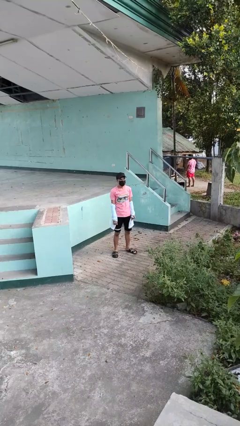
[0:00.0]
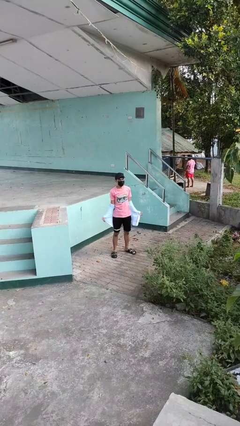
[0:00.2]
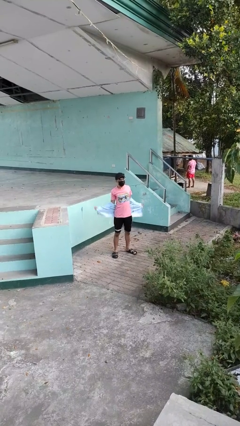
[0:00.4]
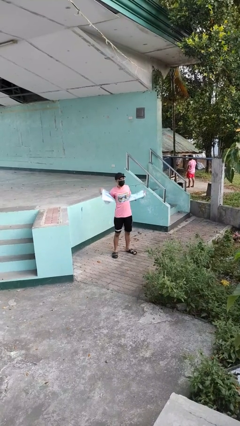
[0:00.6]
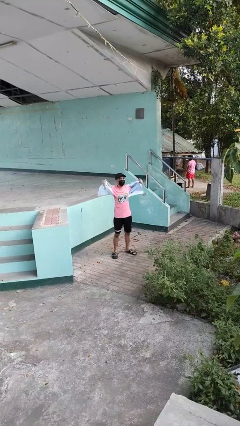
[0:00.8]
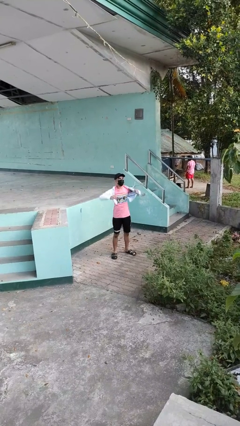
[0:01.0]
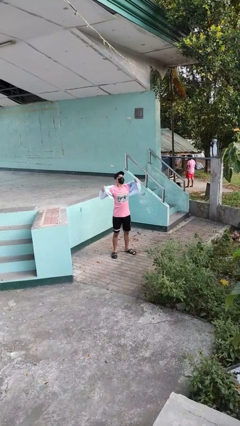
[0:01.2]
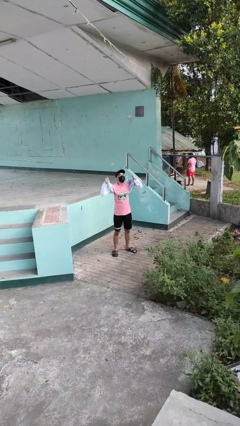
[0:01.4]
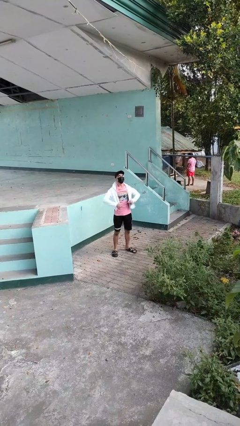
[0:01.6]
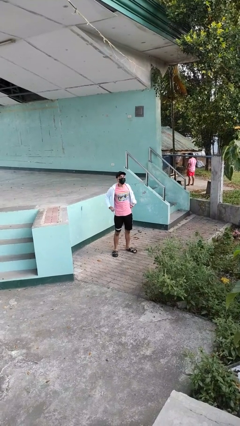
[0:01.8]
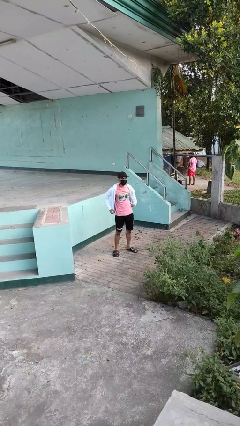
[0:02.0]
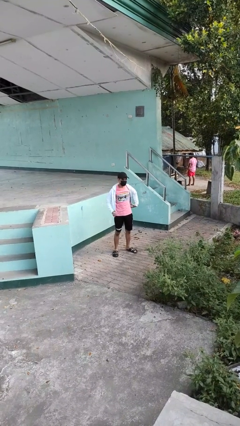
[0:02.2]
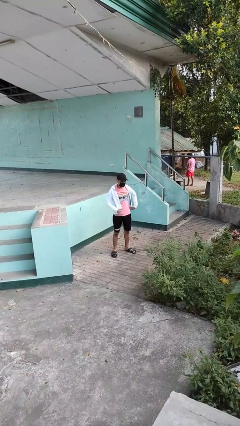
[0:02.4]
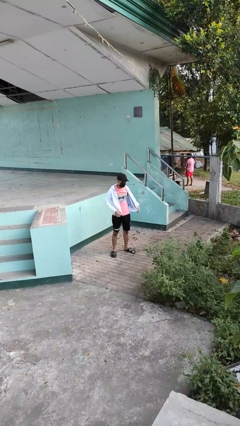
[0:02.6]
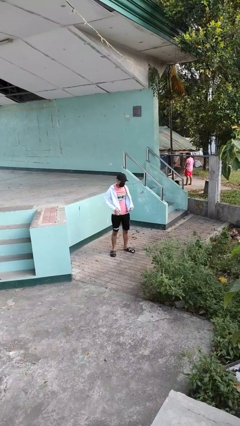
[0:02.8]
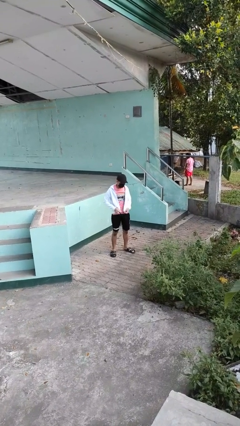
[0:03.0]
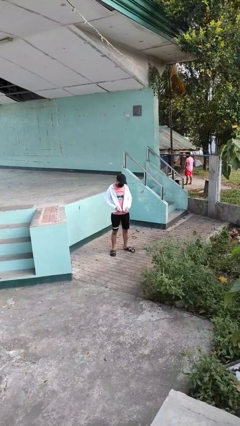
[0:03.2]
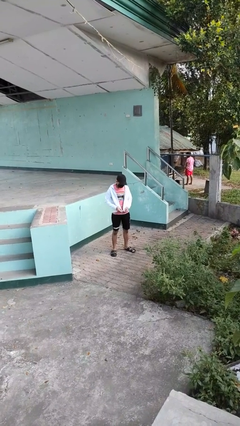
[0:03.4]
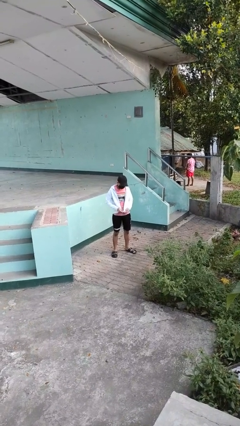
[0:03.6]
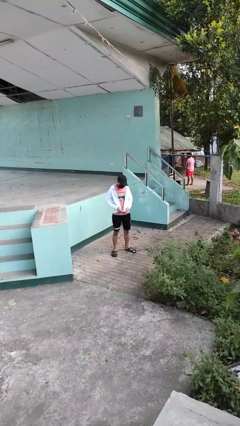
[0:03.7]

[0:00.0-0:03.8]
person puts on jacket

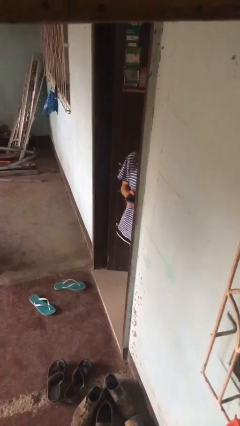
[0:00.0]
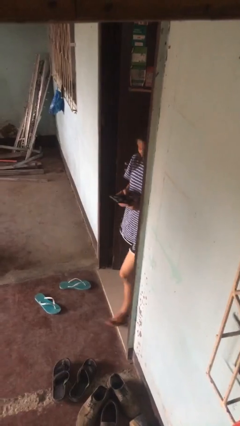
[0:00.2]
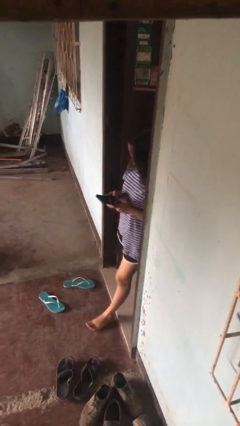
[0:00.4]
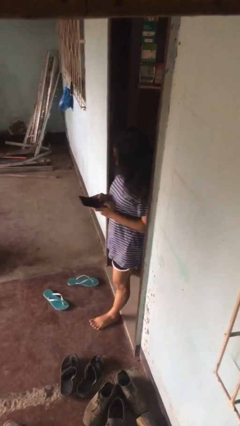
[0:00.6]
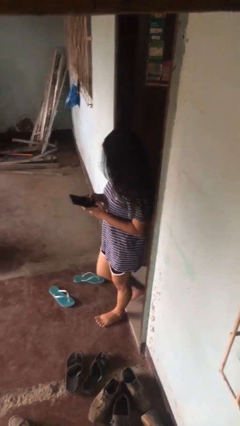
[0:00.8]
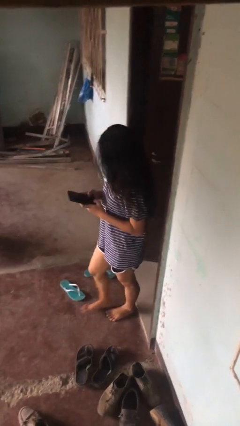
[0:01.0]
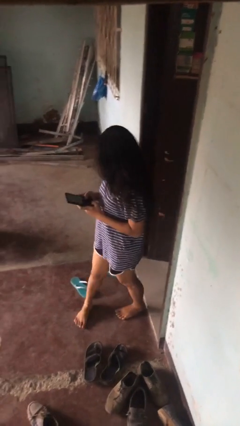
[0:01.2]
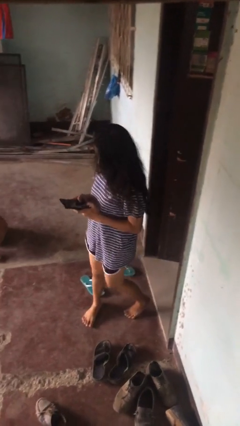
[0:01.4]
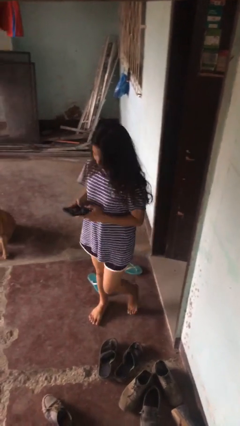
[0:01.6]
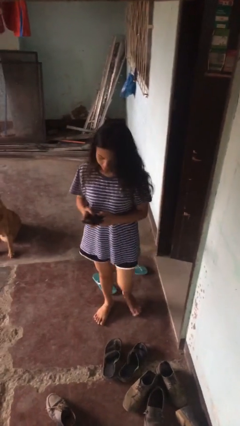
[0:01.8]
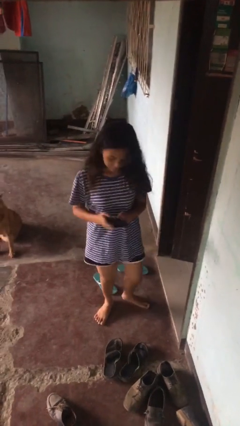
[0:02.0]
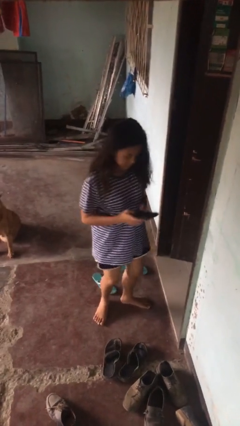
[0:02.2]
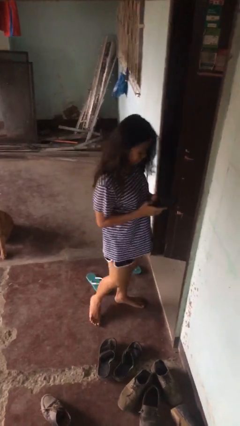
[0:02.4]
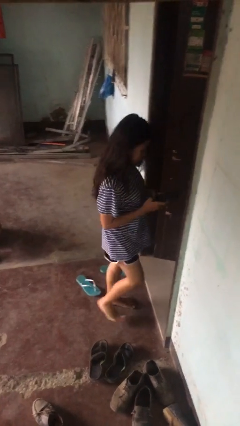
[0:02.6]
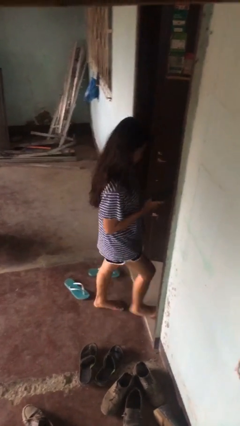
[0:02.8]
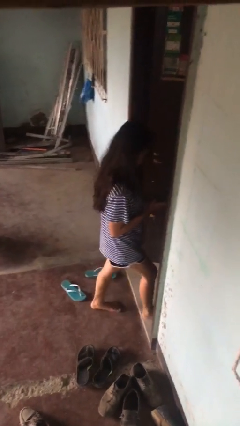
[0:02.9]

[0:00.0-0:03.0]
person exits scene through structure

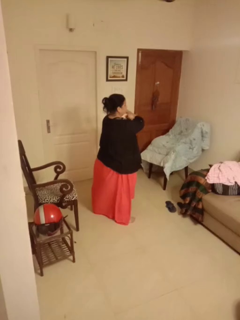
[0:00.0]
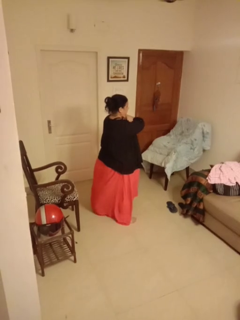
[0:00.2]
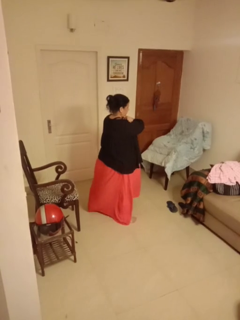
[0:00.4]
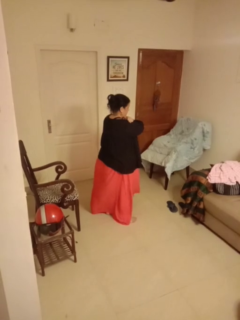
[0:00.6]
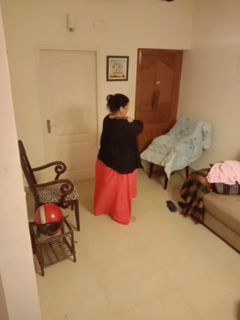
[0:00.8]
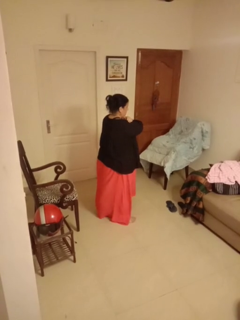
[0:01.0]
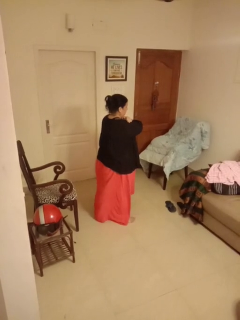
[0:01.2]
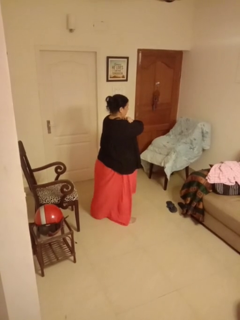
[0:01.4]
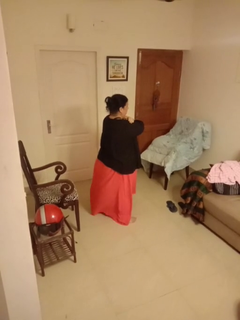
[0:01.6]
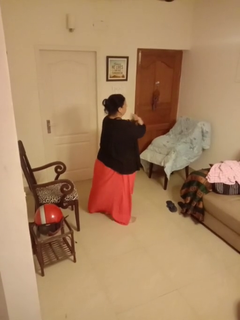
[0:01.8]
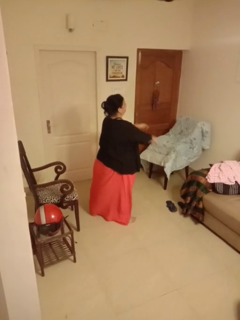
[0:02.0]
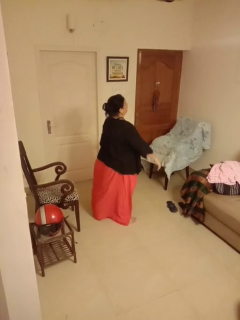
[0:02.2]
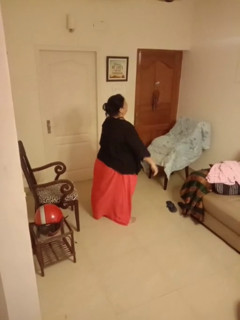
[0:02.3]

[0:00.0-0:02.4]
person gestures arms x

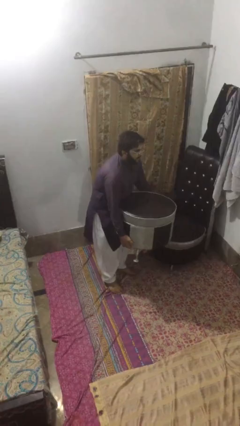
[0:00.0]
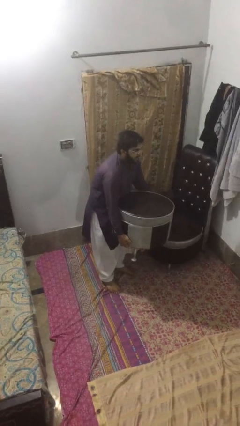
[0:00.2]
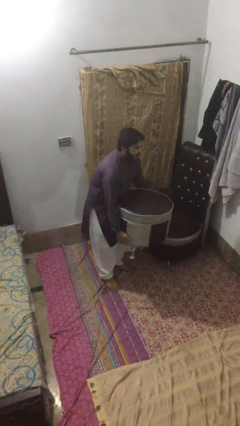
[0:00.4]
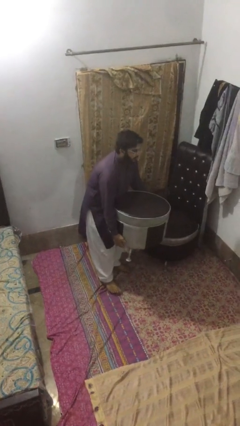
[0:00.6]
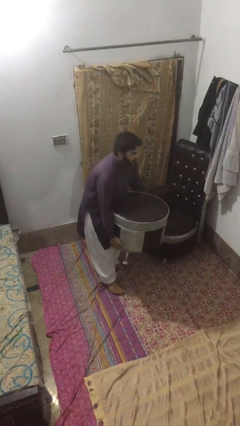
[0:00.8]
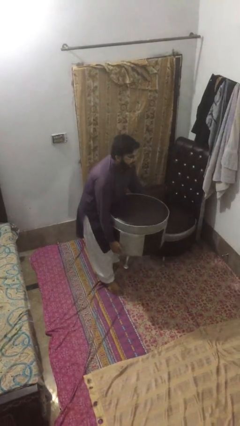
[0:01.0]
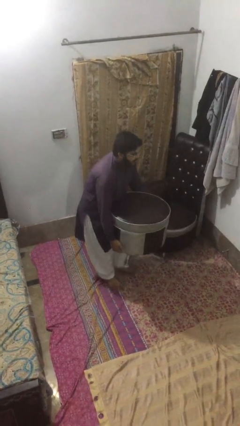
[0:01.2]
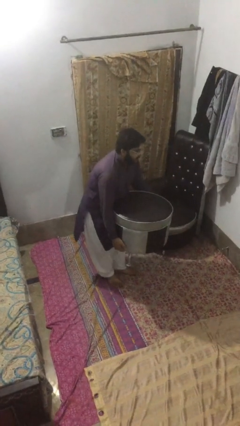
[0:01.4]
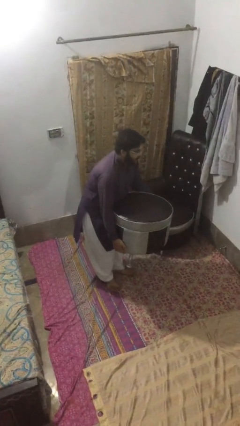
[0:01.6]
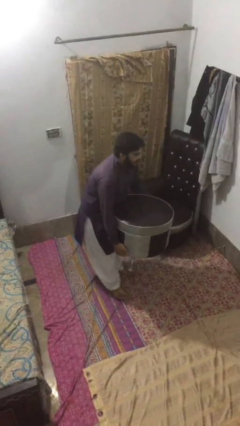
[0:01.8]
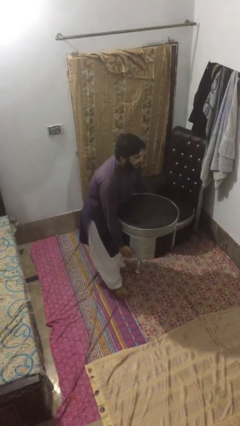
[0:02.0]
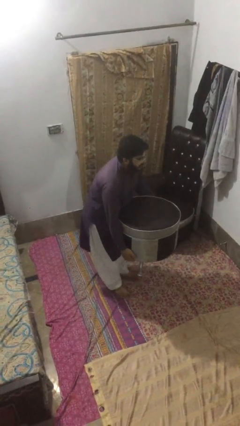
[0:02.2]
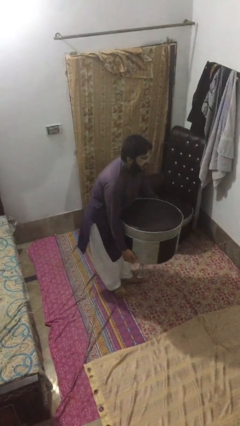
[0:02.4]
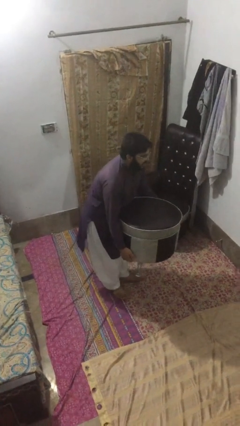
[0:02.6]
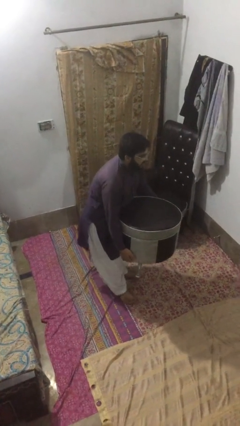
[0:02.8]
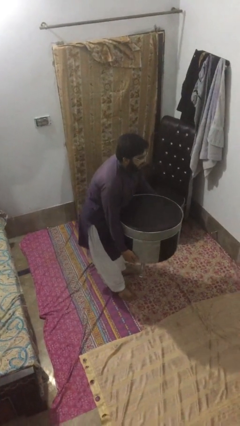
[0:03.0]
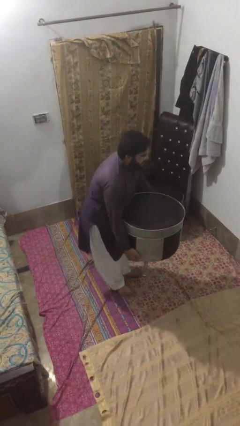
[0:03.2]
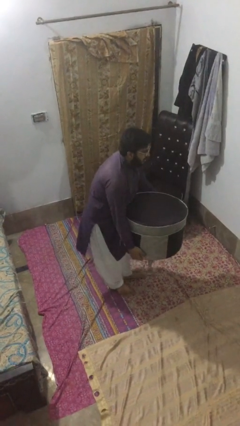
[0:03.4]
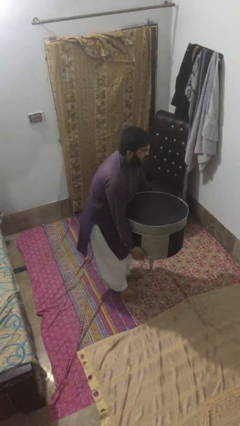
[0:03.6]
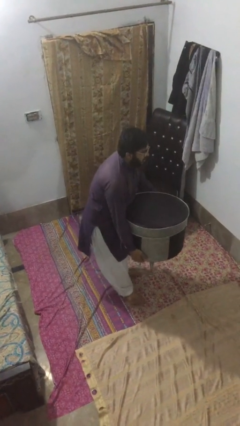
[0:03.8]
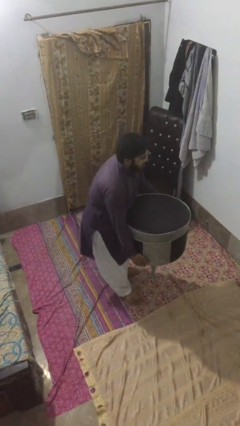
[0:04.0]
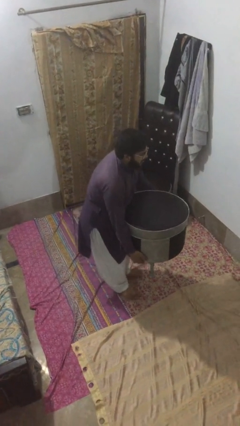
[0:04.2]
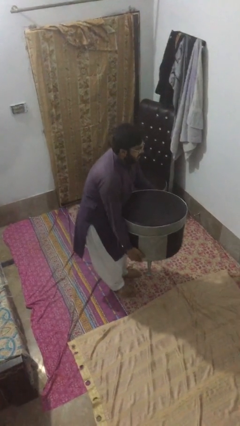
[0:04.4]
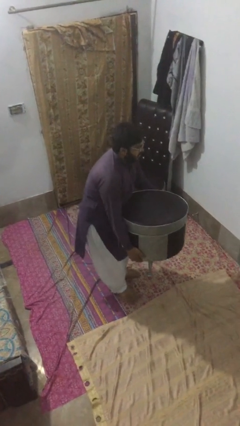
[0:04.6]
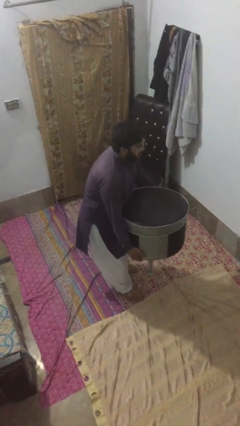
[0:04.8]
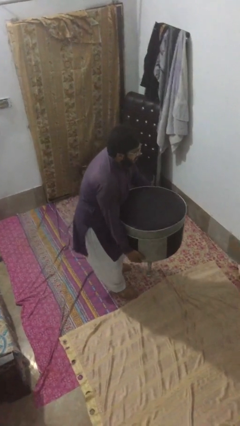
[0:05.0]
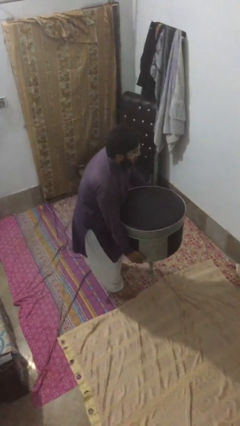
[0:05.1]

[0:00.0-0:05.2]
person carries heavy object

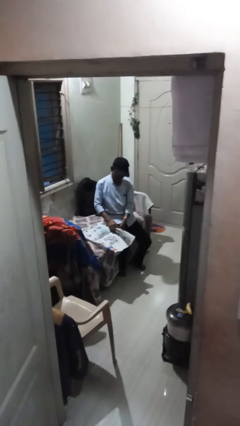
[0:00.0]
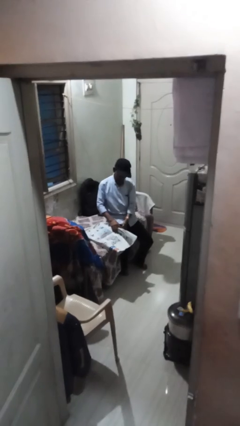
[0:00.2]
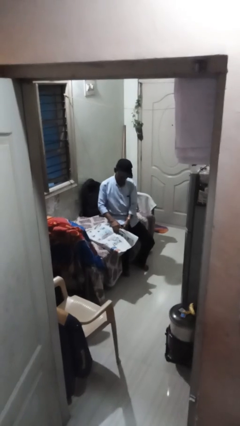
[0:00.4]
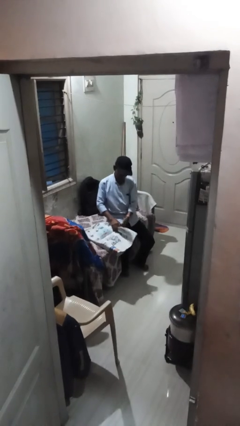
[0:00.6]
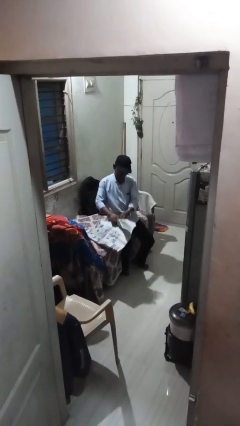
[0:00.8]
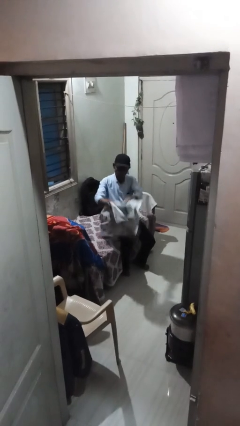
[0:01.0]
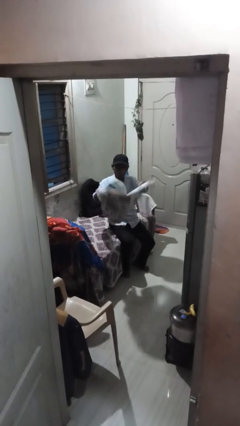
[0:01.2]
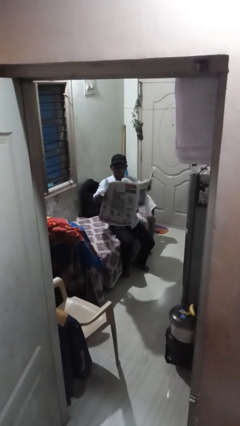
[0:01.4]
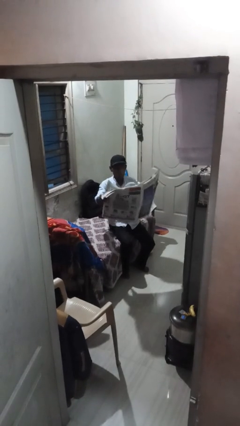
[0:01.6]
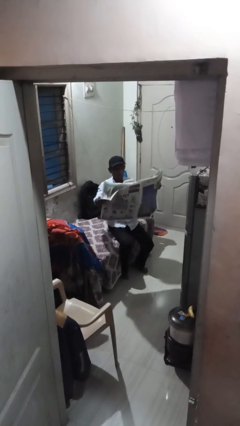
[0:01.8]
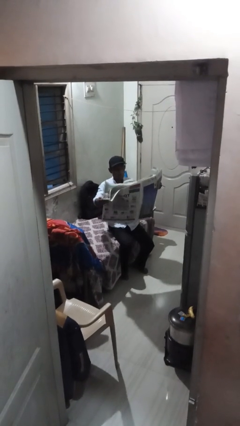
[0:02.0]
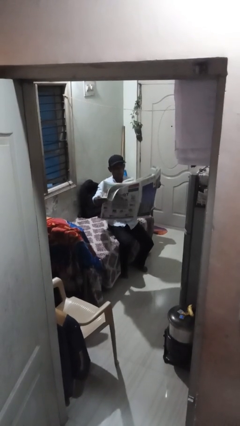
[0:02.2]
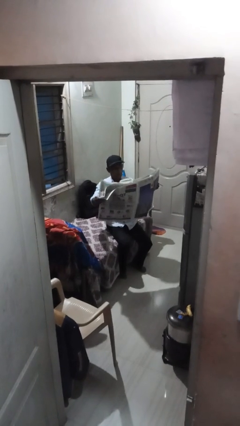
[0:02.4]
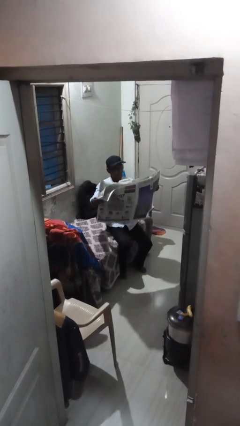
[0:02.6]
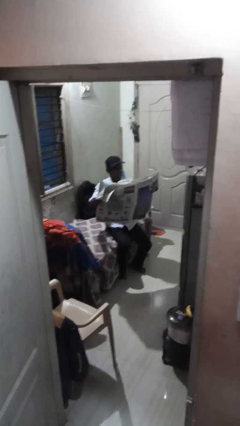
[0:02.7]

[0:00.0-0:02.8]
person reads newspaper

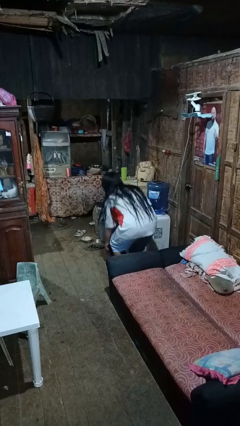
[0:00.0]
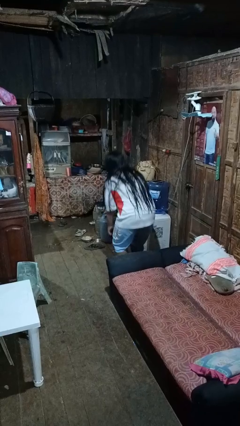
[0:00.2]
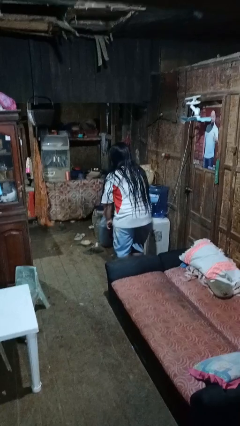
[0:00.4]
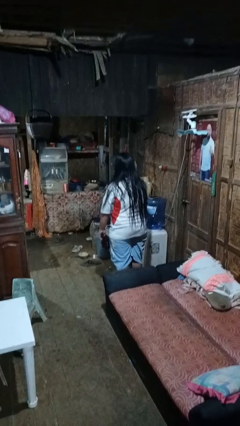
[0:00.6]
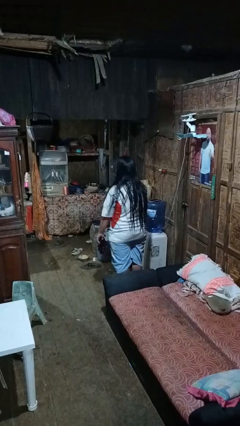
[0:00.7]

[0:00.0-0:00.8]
person picks up object from floor

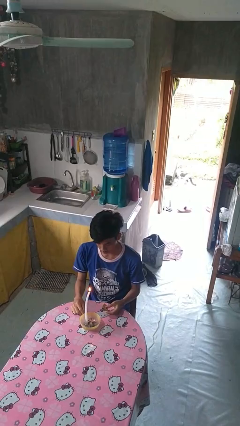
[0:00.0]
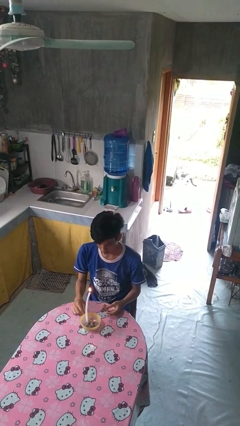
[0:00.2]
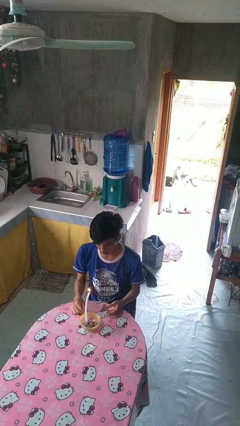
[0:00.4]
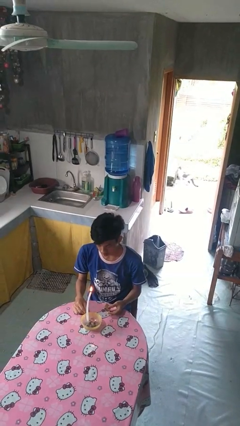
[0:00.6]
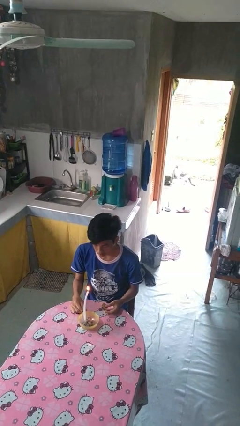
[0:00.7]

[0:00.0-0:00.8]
person extinguishes candle
